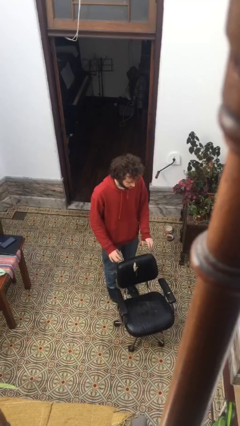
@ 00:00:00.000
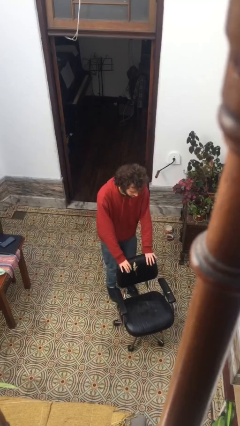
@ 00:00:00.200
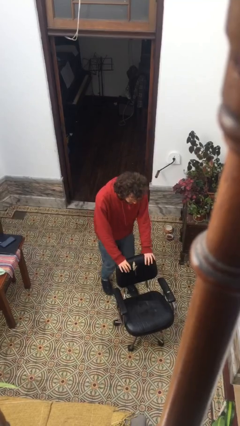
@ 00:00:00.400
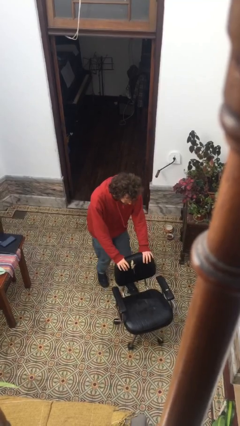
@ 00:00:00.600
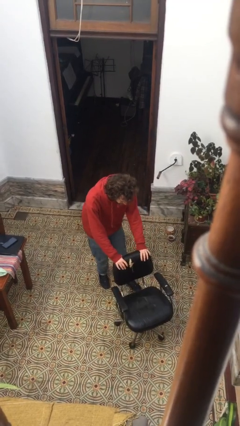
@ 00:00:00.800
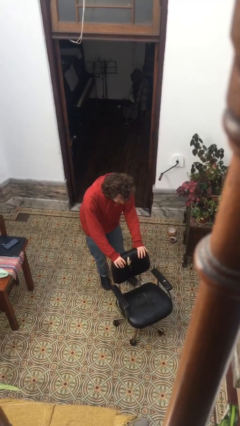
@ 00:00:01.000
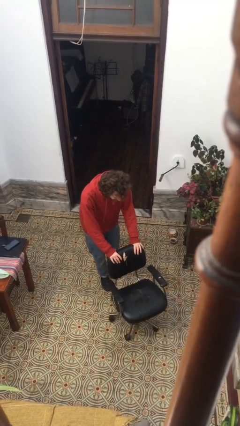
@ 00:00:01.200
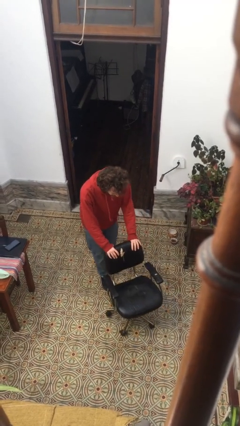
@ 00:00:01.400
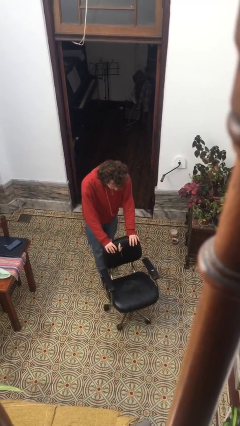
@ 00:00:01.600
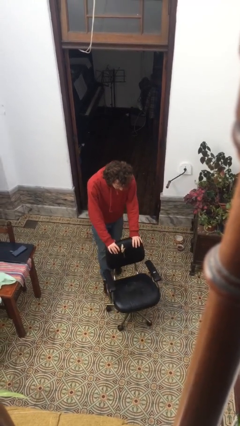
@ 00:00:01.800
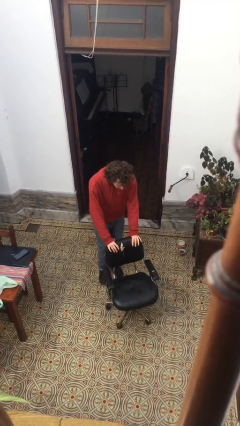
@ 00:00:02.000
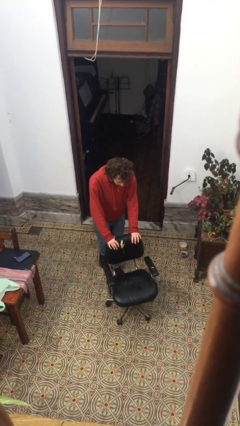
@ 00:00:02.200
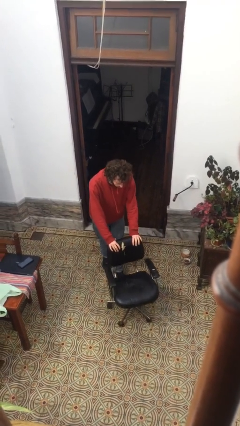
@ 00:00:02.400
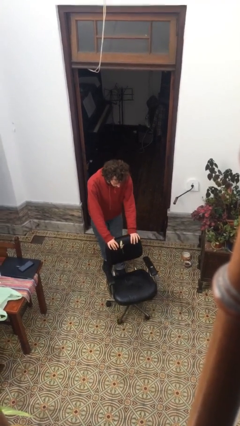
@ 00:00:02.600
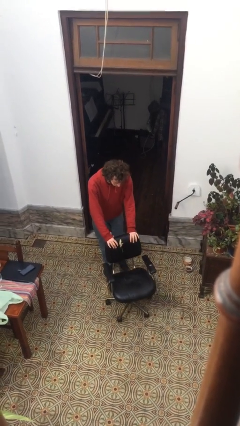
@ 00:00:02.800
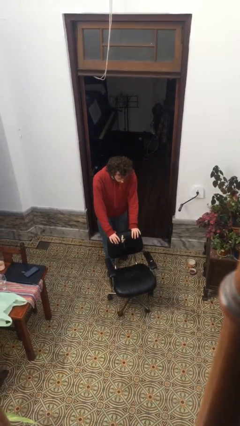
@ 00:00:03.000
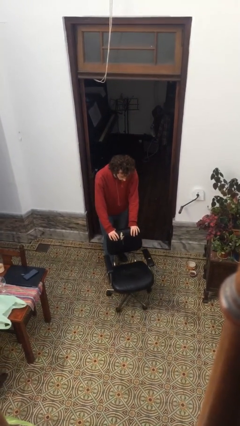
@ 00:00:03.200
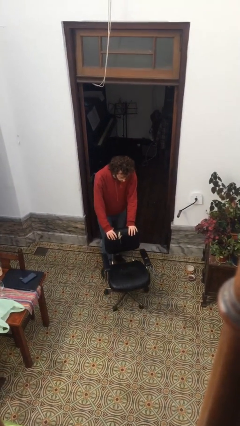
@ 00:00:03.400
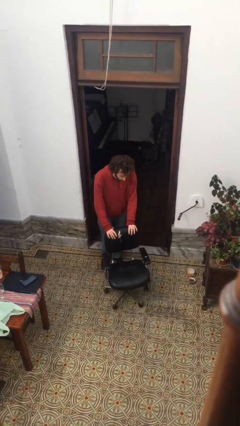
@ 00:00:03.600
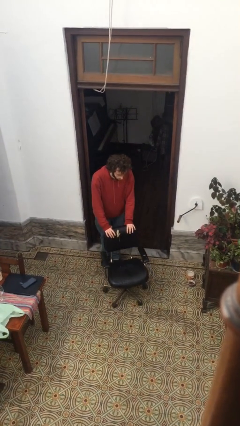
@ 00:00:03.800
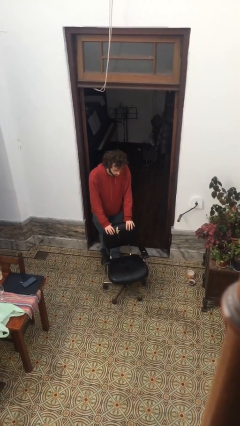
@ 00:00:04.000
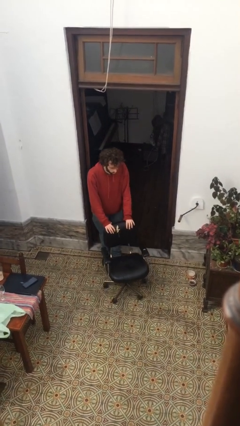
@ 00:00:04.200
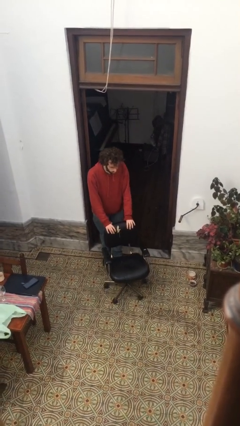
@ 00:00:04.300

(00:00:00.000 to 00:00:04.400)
person pulls wheeled cart

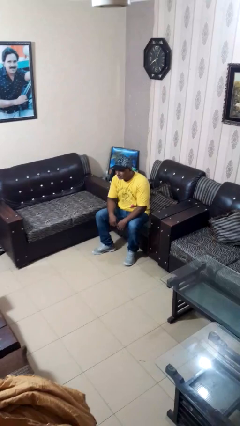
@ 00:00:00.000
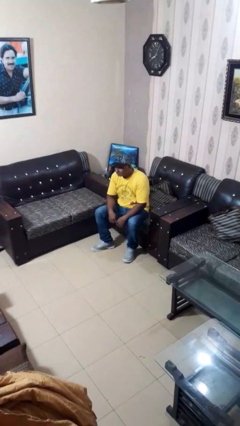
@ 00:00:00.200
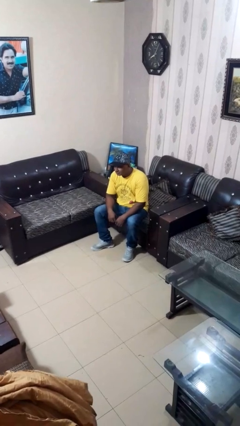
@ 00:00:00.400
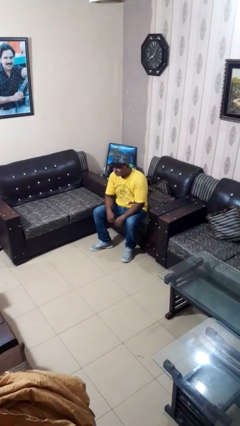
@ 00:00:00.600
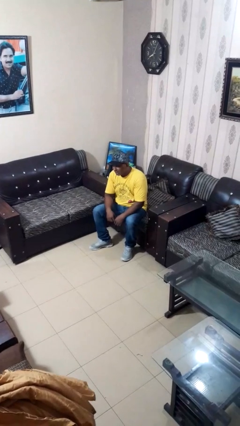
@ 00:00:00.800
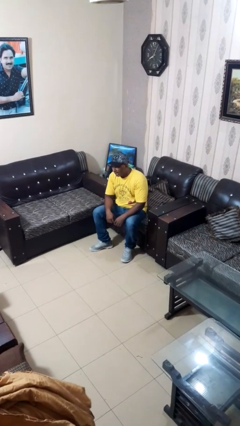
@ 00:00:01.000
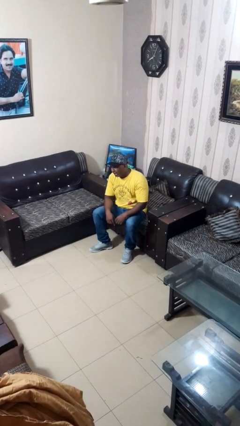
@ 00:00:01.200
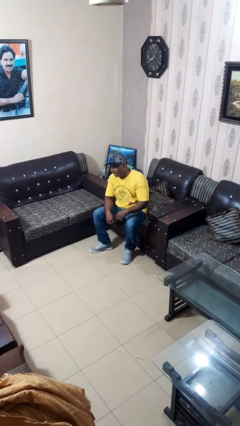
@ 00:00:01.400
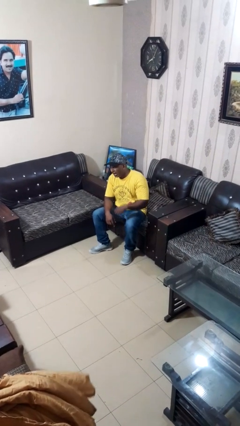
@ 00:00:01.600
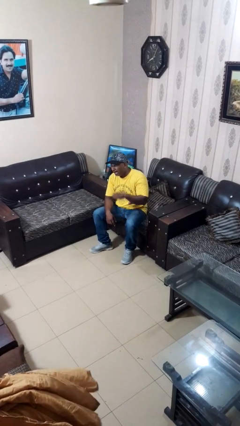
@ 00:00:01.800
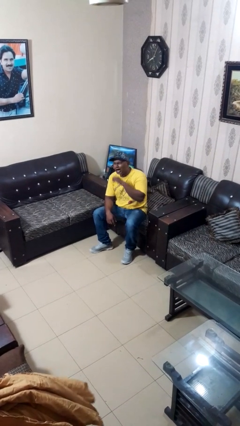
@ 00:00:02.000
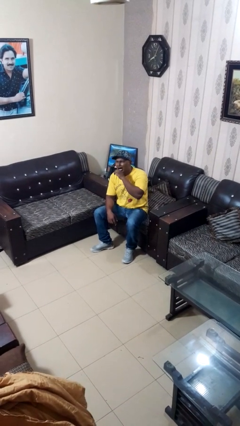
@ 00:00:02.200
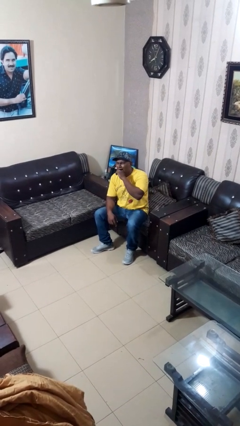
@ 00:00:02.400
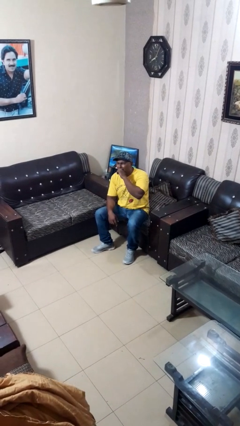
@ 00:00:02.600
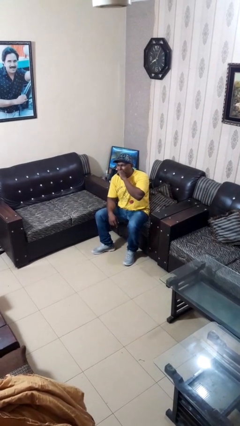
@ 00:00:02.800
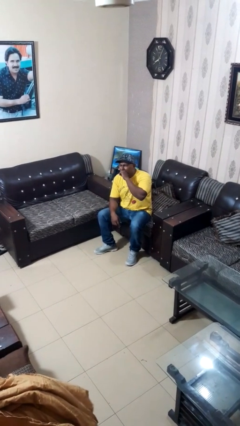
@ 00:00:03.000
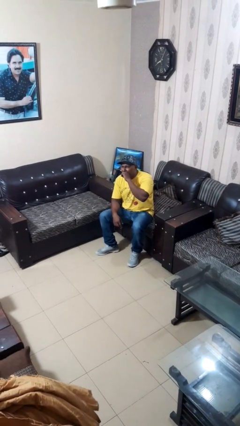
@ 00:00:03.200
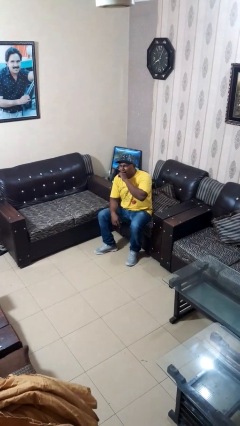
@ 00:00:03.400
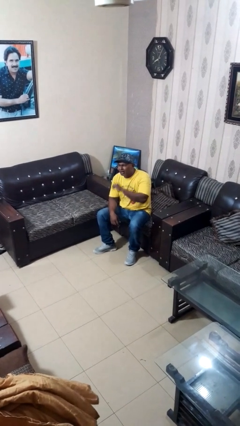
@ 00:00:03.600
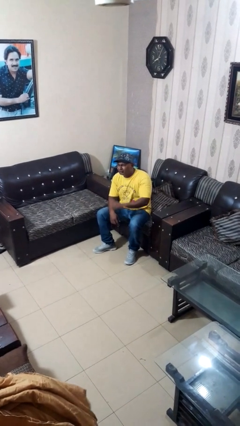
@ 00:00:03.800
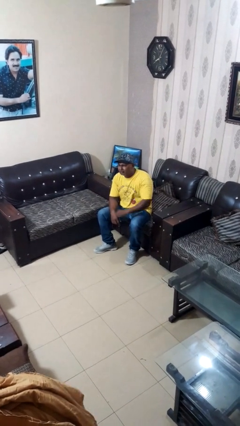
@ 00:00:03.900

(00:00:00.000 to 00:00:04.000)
person yawns

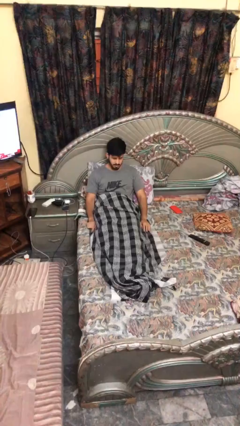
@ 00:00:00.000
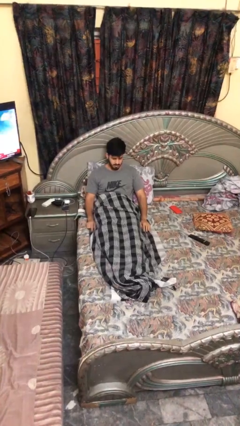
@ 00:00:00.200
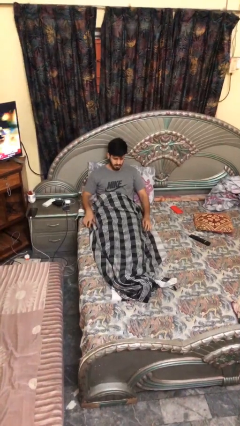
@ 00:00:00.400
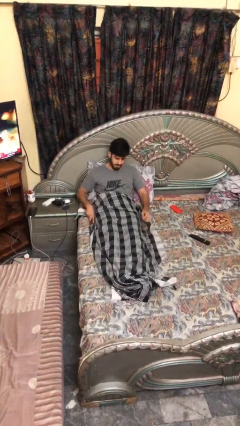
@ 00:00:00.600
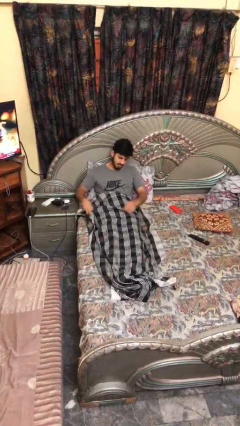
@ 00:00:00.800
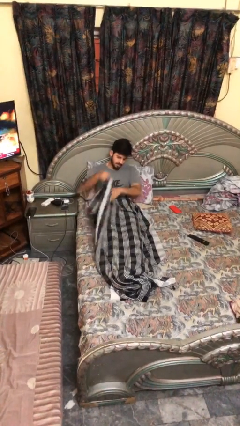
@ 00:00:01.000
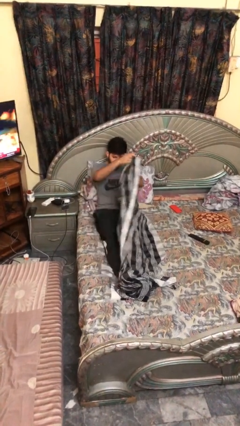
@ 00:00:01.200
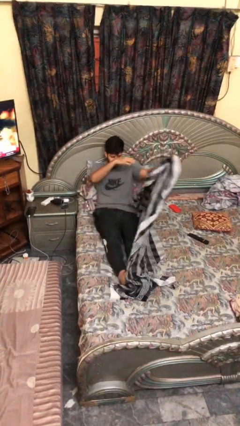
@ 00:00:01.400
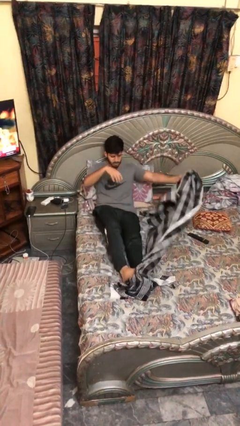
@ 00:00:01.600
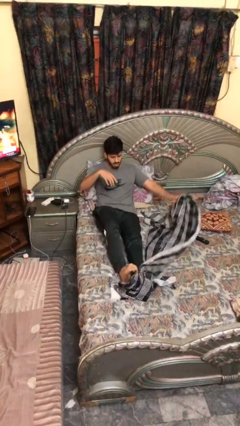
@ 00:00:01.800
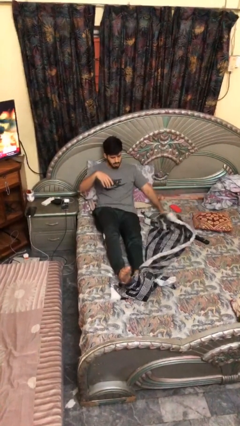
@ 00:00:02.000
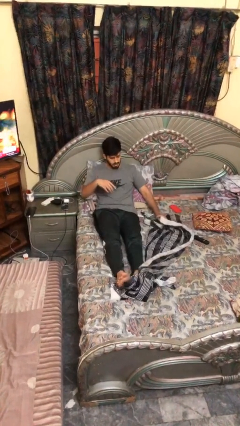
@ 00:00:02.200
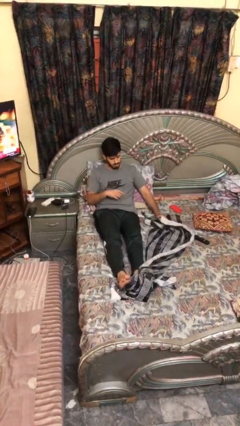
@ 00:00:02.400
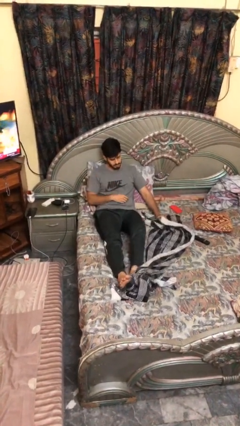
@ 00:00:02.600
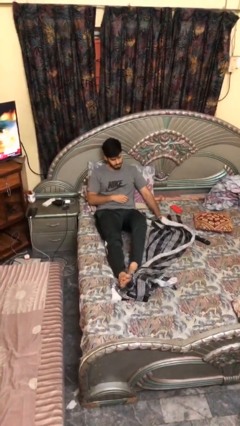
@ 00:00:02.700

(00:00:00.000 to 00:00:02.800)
person uncovers with bedsheets

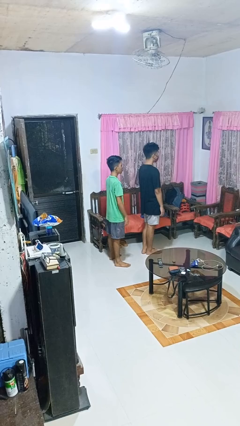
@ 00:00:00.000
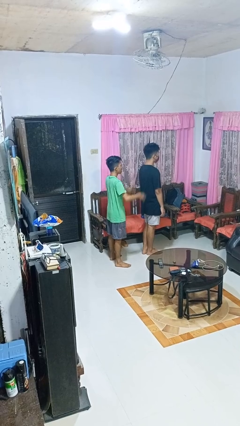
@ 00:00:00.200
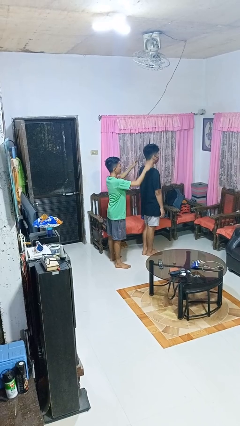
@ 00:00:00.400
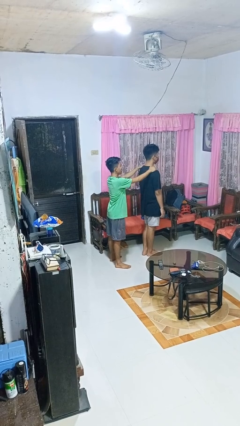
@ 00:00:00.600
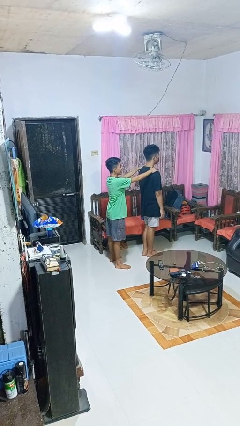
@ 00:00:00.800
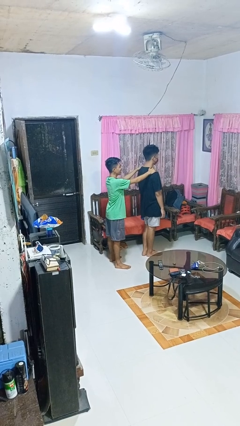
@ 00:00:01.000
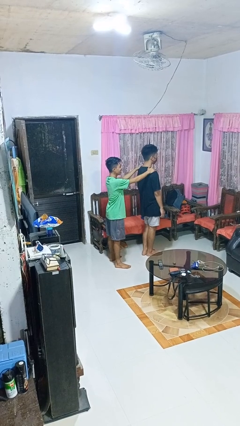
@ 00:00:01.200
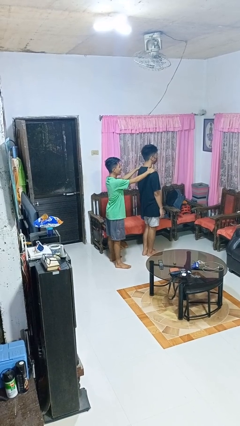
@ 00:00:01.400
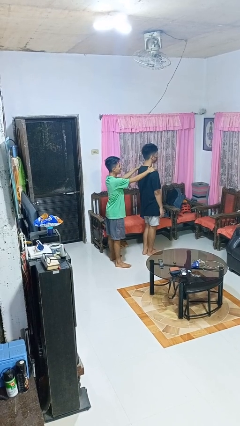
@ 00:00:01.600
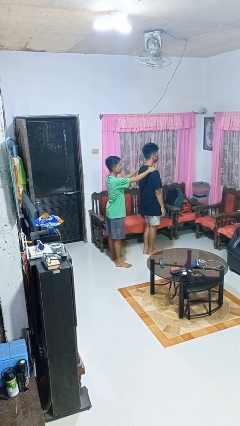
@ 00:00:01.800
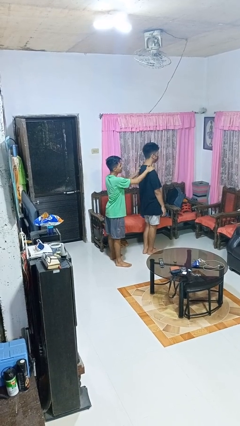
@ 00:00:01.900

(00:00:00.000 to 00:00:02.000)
person grabs person by shoulder

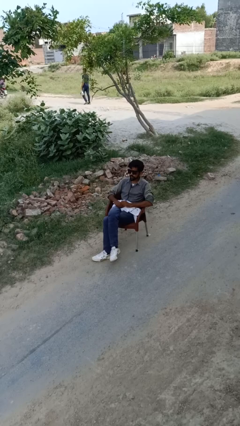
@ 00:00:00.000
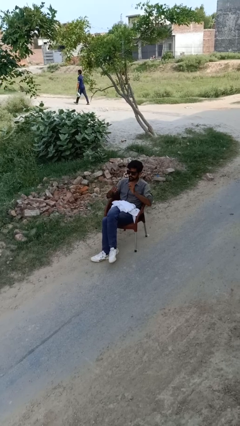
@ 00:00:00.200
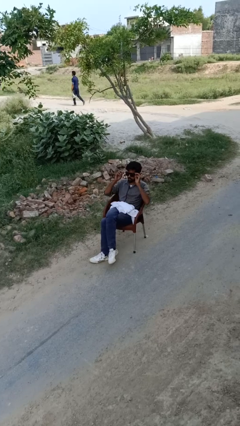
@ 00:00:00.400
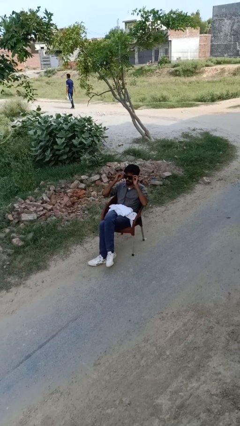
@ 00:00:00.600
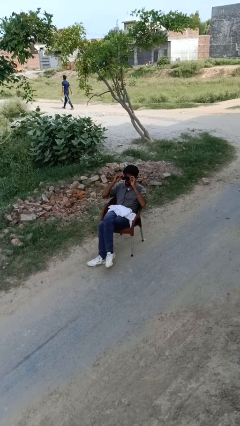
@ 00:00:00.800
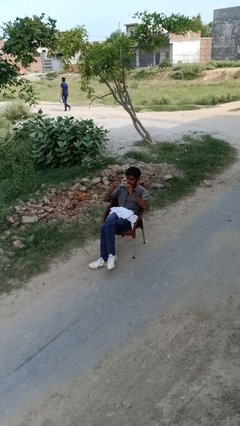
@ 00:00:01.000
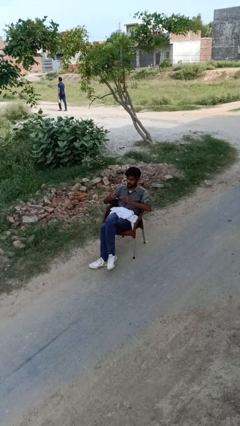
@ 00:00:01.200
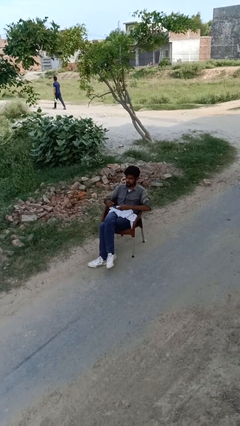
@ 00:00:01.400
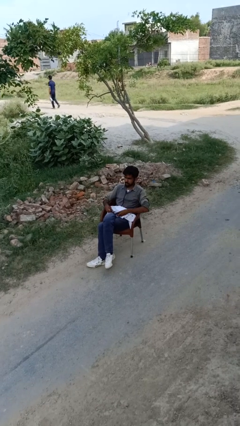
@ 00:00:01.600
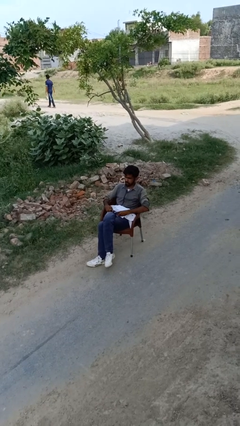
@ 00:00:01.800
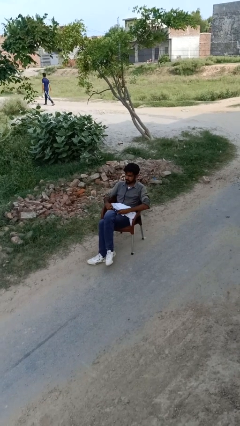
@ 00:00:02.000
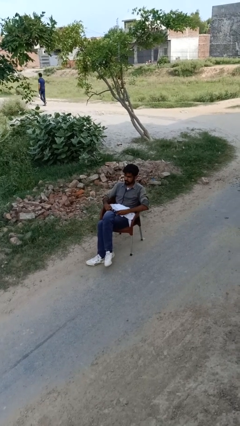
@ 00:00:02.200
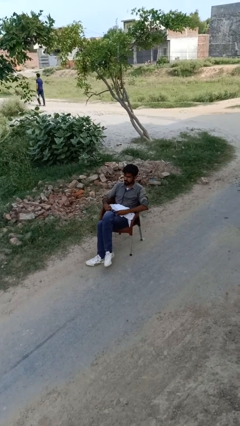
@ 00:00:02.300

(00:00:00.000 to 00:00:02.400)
person takes off glasses

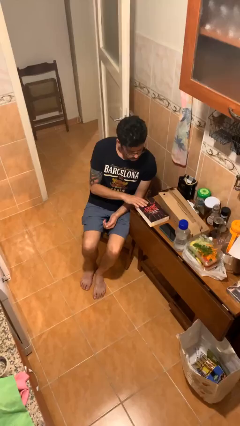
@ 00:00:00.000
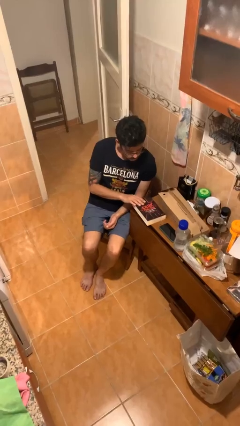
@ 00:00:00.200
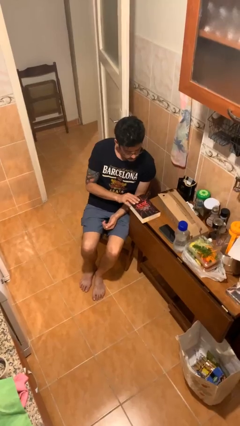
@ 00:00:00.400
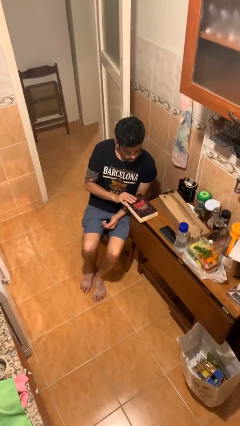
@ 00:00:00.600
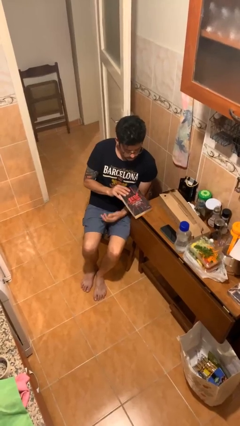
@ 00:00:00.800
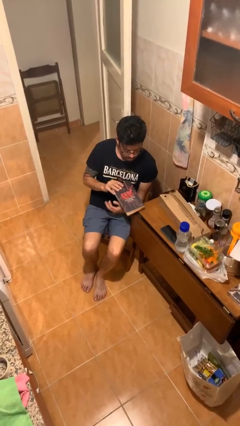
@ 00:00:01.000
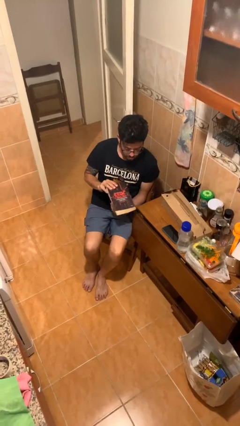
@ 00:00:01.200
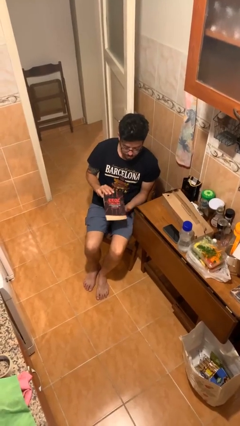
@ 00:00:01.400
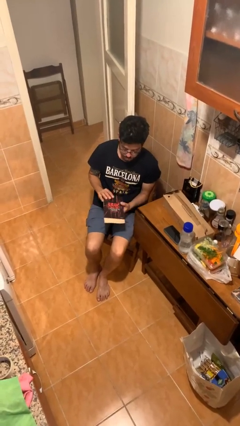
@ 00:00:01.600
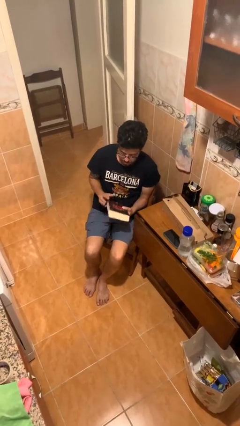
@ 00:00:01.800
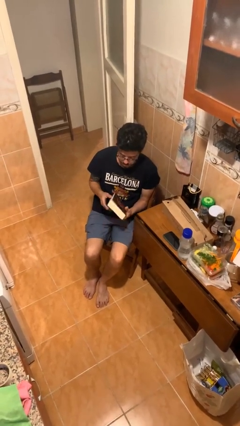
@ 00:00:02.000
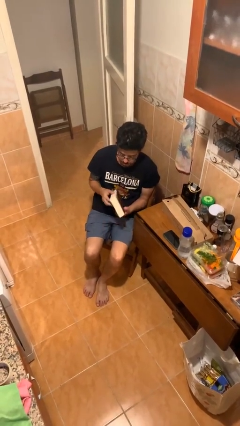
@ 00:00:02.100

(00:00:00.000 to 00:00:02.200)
person picks up object from table
